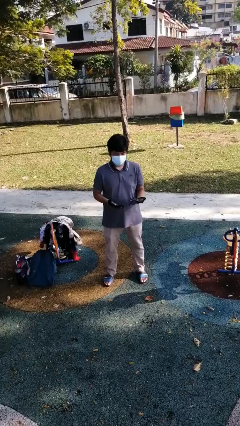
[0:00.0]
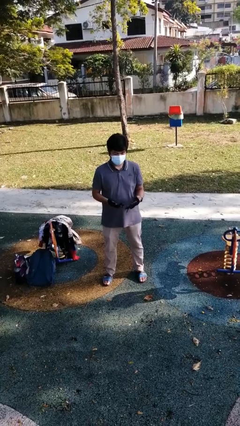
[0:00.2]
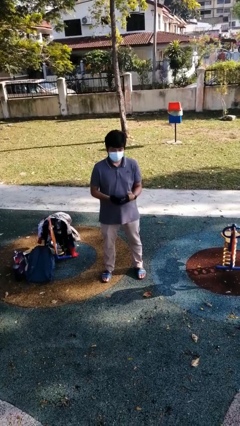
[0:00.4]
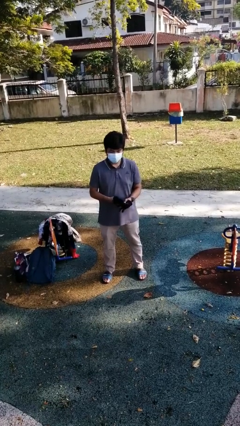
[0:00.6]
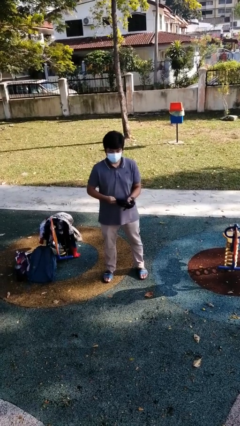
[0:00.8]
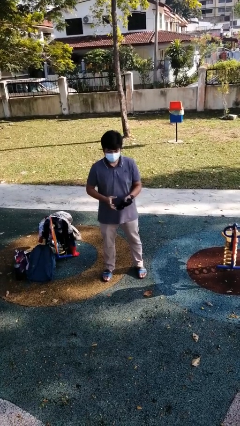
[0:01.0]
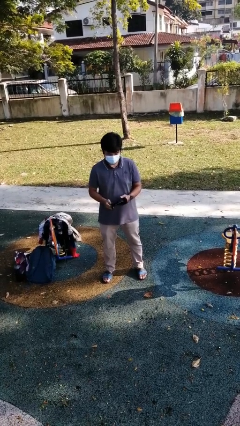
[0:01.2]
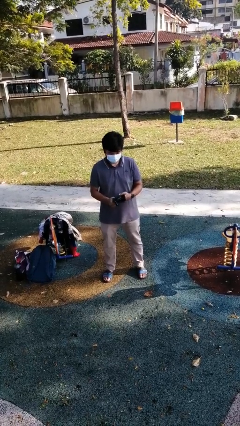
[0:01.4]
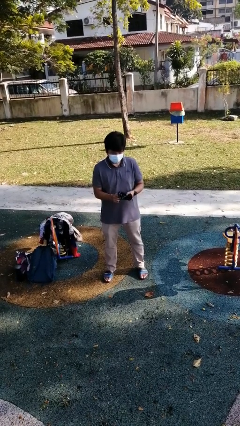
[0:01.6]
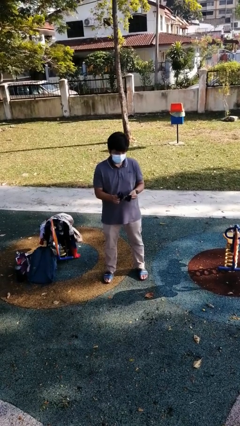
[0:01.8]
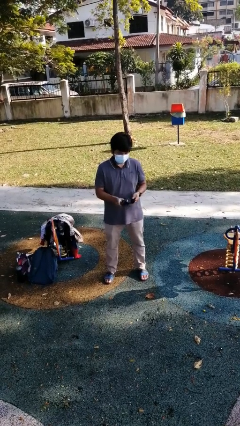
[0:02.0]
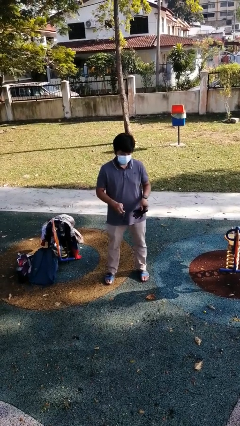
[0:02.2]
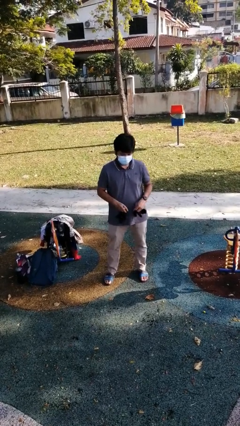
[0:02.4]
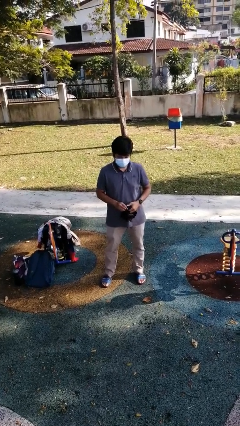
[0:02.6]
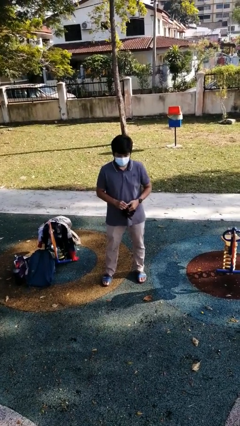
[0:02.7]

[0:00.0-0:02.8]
person takes off gloves

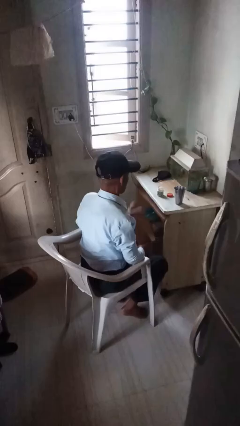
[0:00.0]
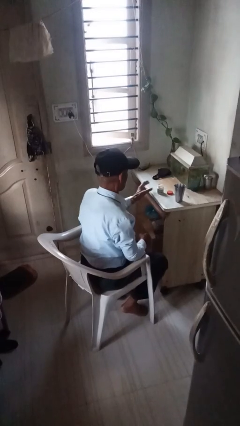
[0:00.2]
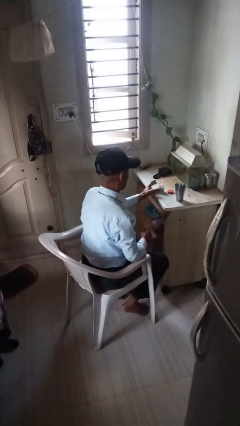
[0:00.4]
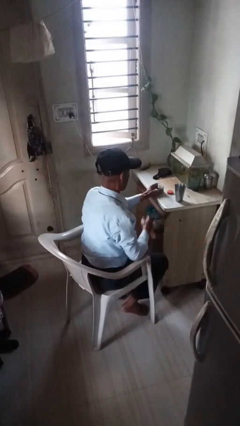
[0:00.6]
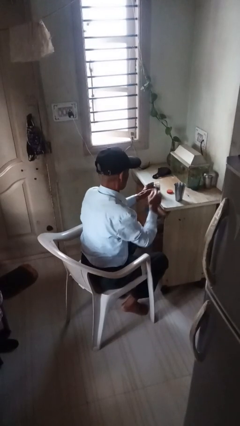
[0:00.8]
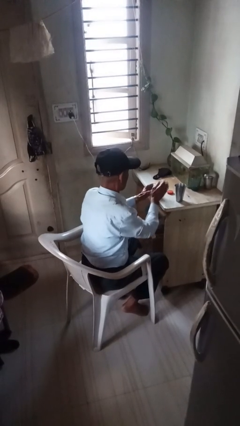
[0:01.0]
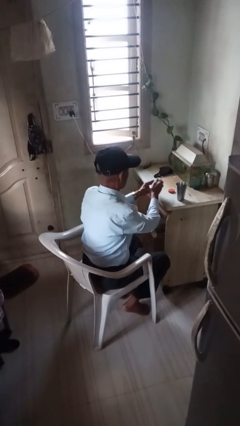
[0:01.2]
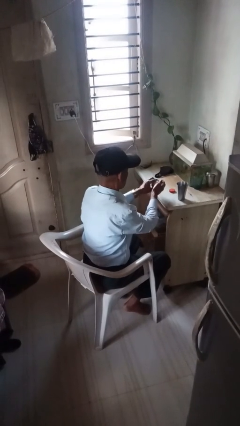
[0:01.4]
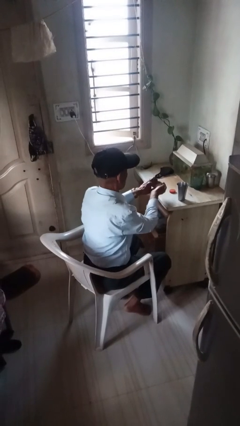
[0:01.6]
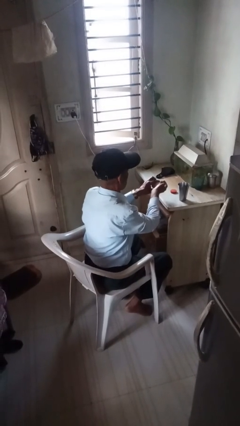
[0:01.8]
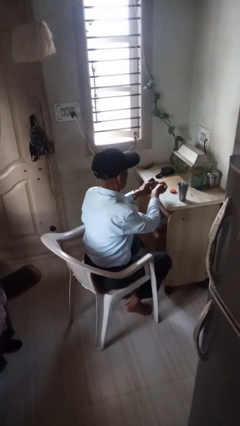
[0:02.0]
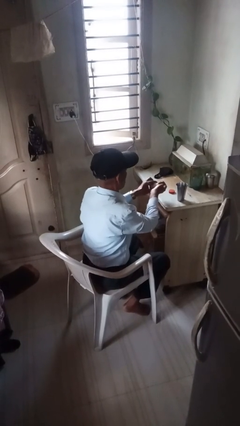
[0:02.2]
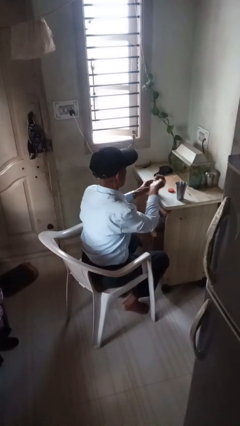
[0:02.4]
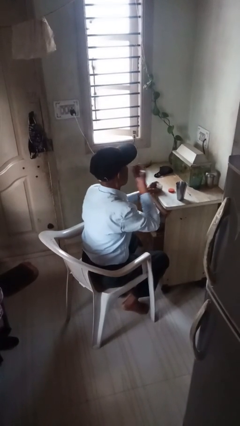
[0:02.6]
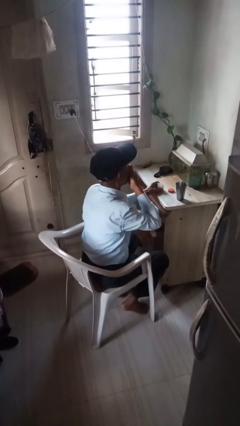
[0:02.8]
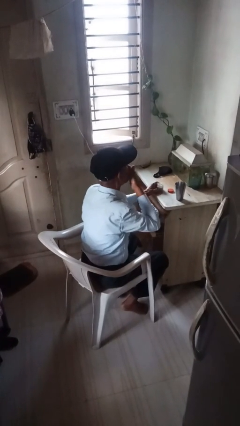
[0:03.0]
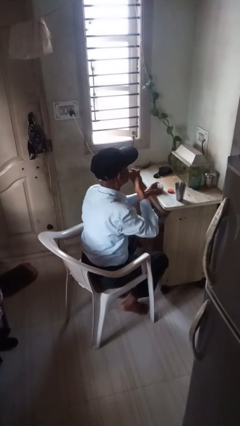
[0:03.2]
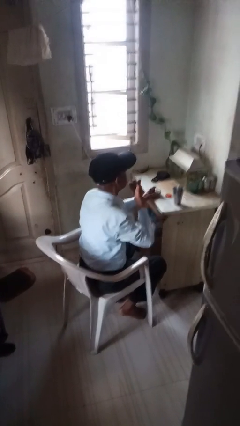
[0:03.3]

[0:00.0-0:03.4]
person takes medicine pills

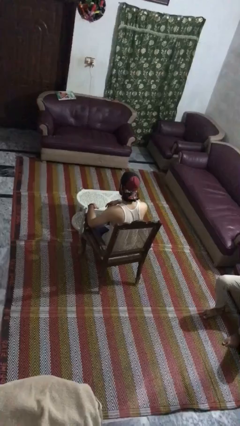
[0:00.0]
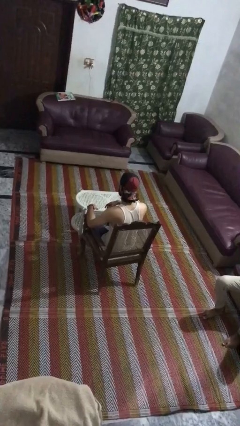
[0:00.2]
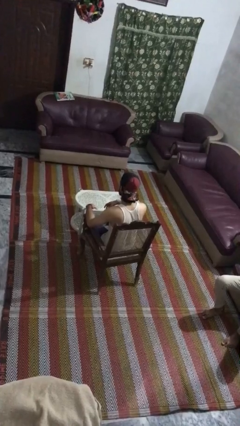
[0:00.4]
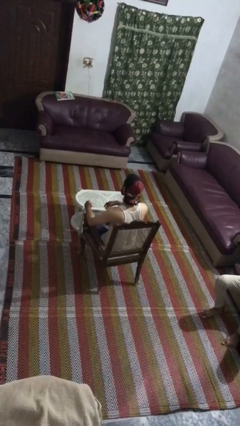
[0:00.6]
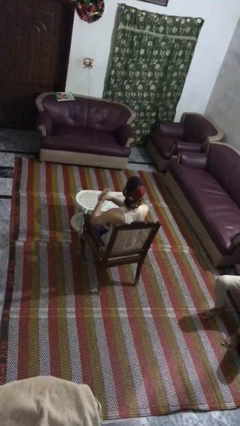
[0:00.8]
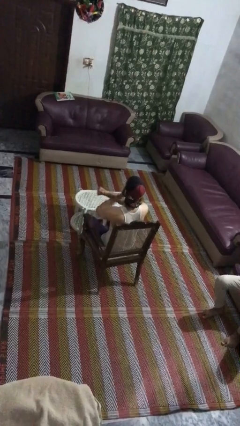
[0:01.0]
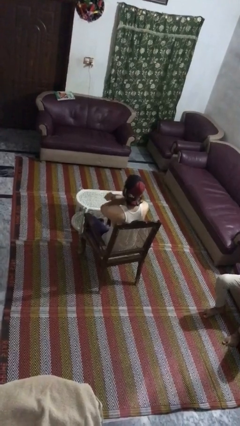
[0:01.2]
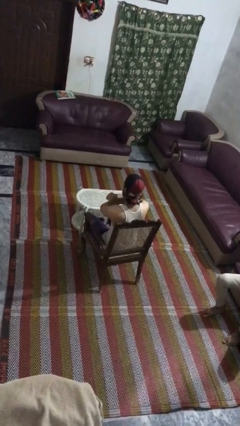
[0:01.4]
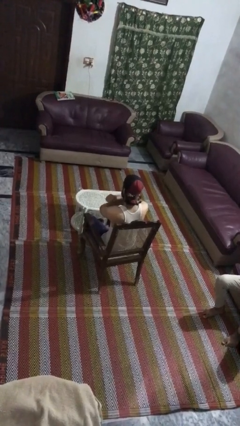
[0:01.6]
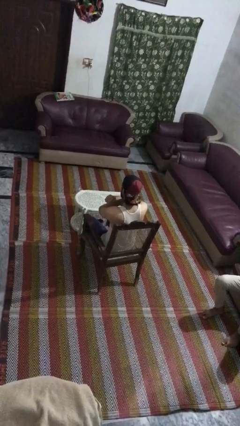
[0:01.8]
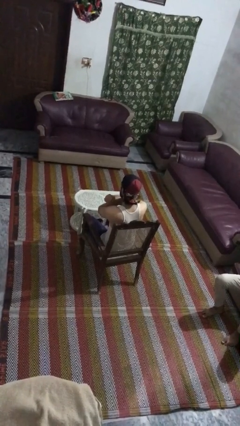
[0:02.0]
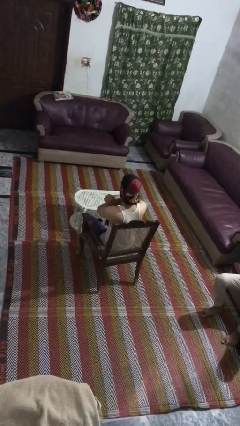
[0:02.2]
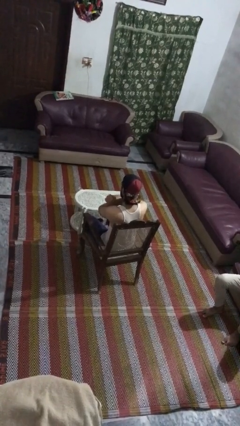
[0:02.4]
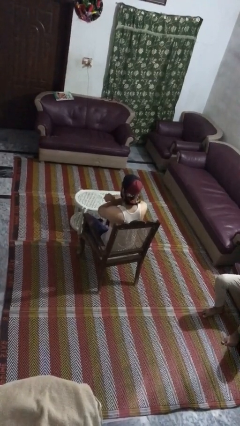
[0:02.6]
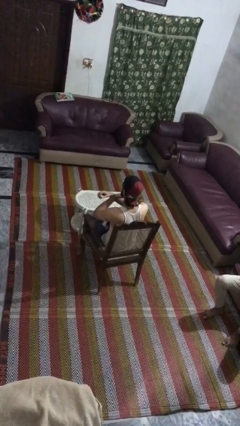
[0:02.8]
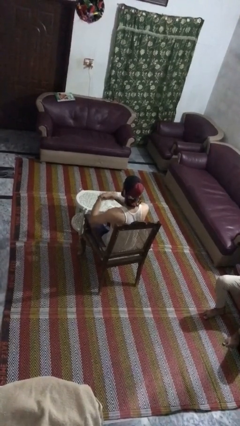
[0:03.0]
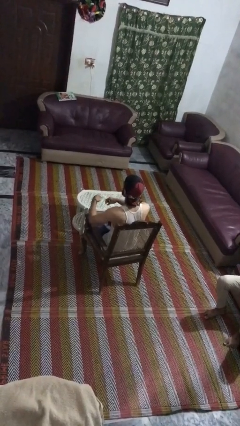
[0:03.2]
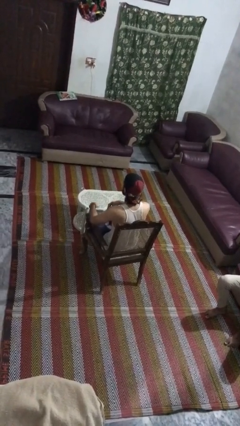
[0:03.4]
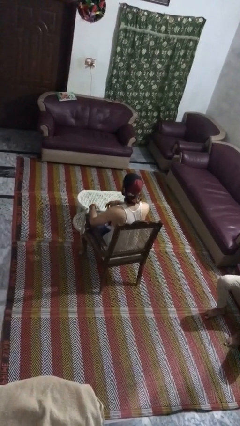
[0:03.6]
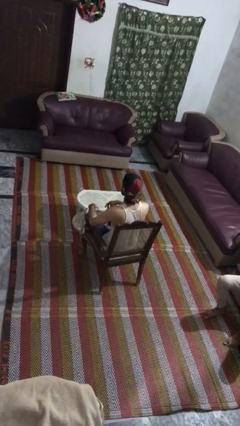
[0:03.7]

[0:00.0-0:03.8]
person gestures arms x

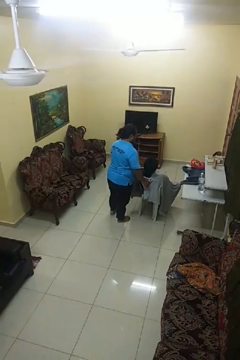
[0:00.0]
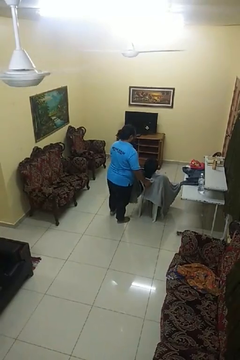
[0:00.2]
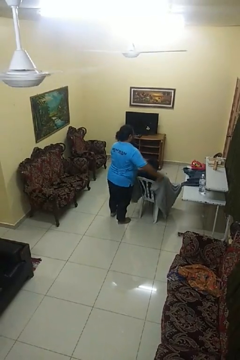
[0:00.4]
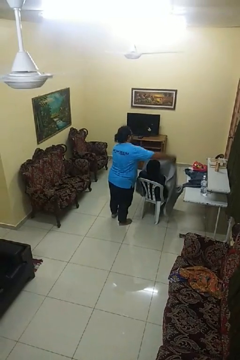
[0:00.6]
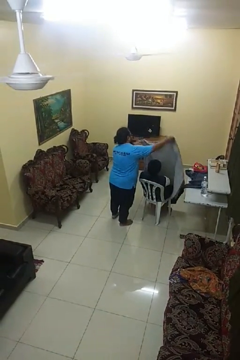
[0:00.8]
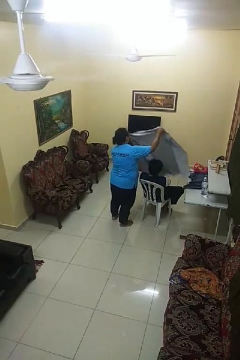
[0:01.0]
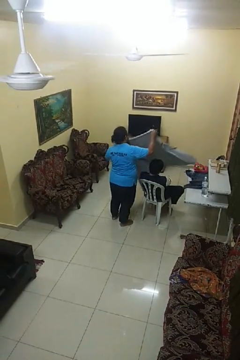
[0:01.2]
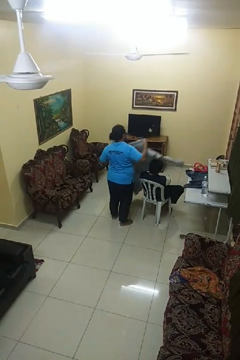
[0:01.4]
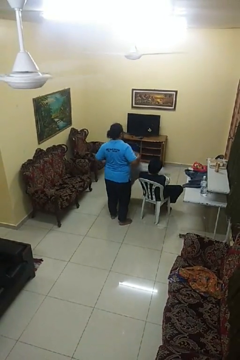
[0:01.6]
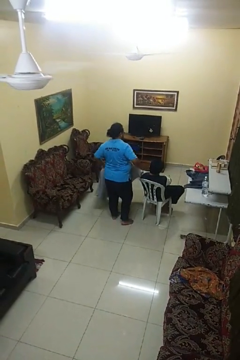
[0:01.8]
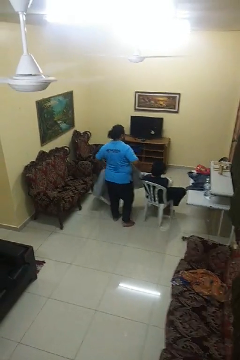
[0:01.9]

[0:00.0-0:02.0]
person uncovers friend with blanket

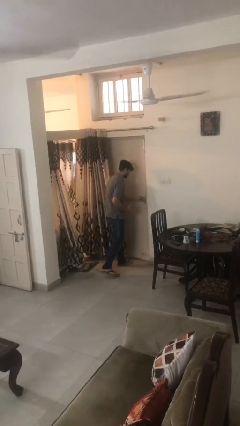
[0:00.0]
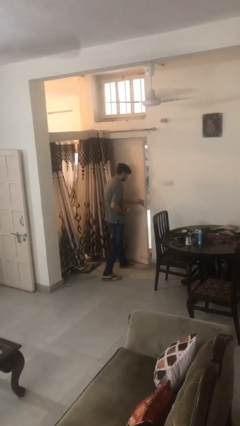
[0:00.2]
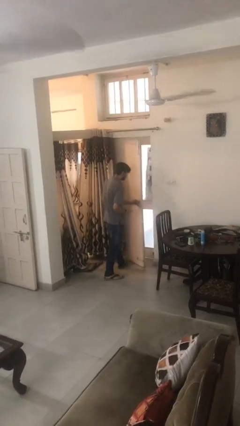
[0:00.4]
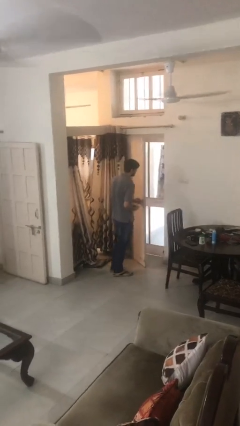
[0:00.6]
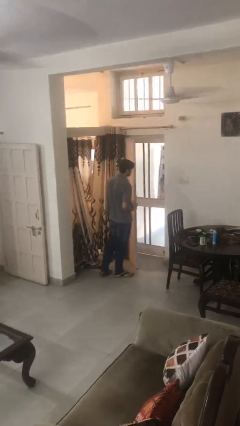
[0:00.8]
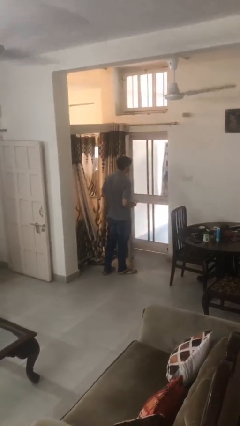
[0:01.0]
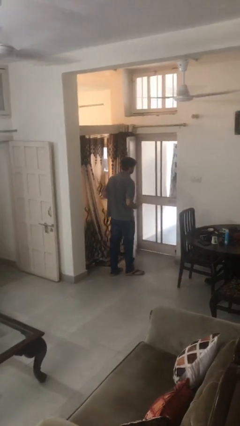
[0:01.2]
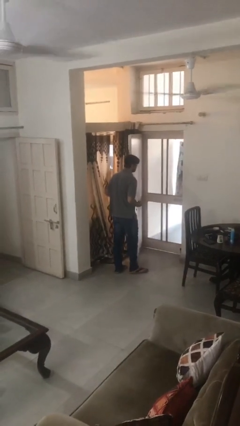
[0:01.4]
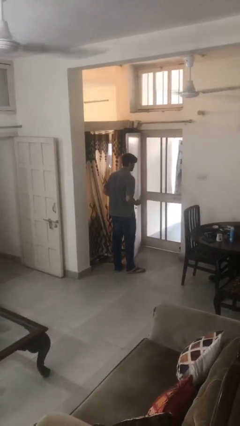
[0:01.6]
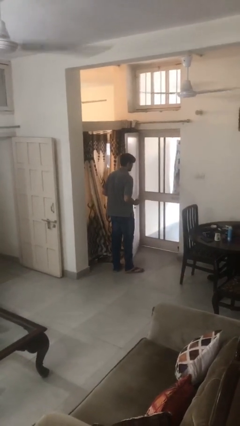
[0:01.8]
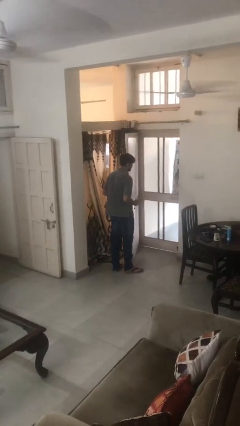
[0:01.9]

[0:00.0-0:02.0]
person opens facility door

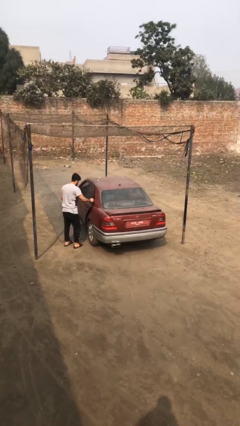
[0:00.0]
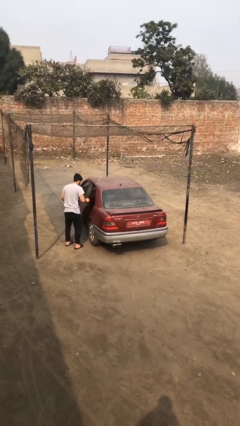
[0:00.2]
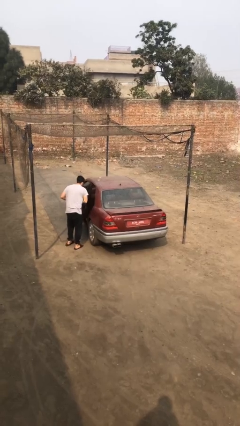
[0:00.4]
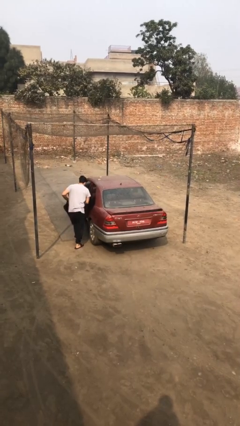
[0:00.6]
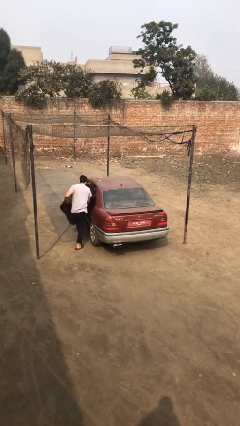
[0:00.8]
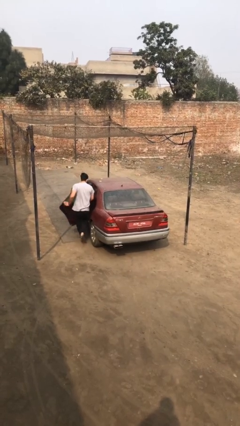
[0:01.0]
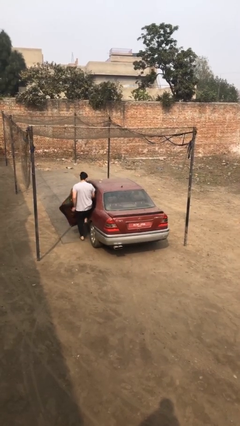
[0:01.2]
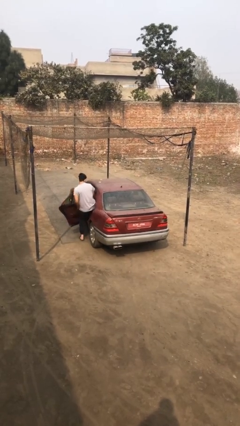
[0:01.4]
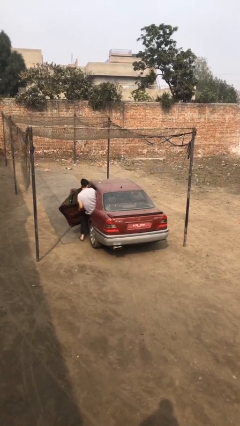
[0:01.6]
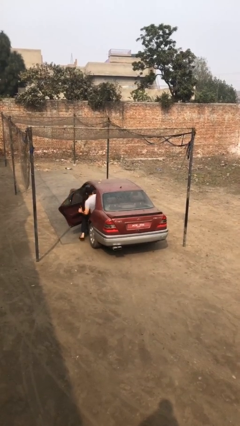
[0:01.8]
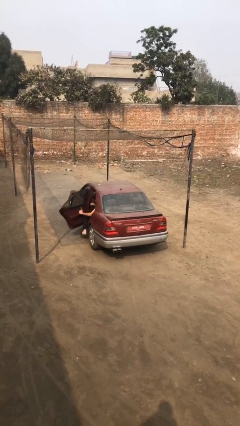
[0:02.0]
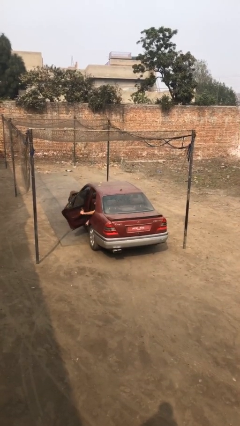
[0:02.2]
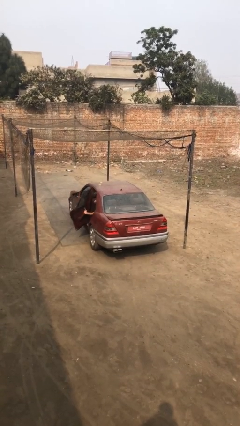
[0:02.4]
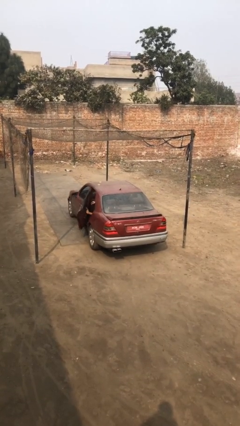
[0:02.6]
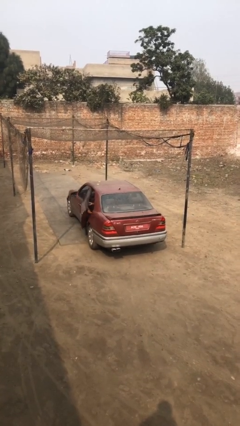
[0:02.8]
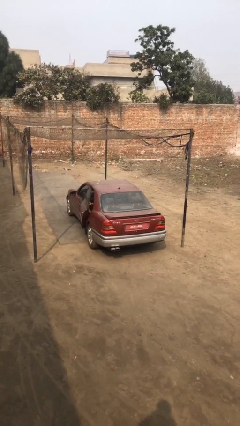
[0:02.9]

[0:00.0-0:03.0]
car picks up person

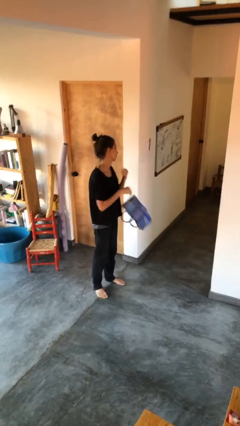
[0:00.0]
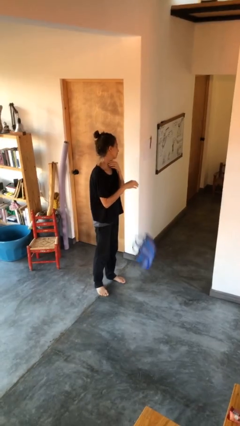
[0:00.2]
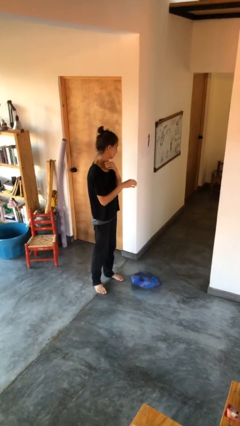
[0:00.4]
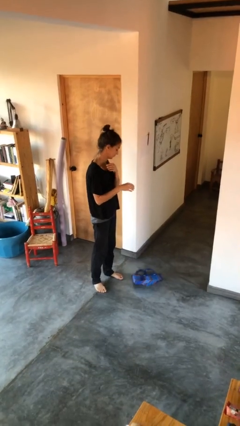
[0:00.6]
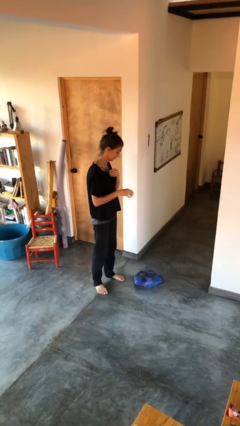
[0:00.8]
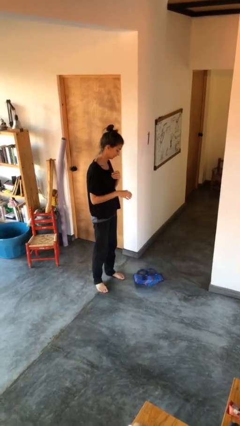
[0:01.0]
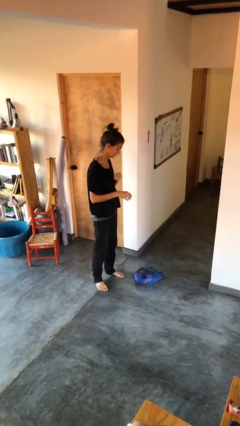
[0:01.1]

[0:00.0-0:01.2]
person drops object
